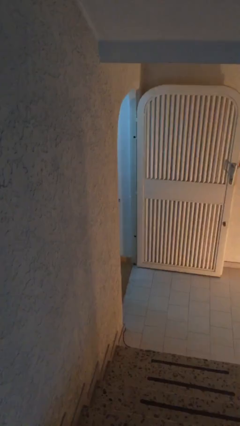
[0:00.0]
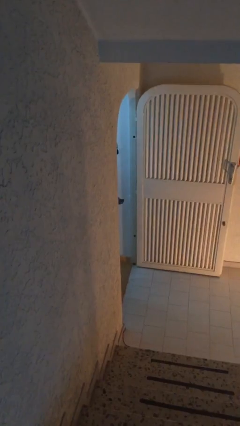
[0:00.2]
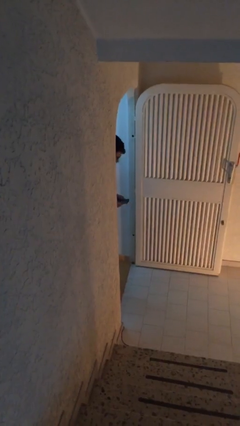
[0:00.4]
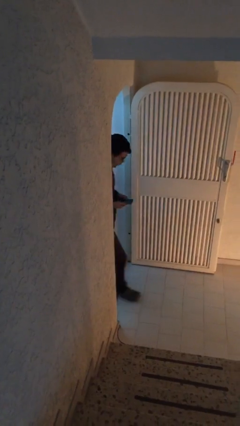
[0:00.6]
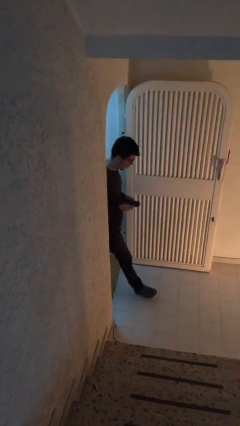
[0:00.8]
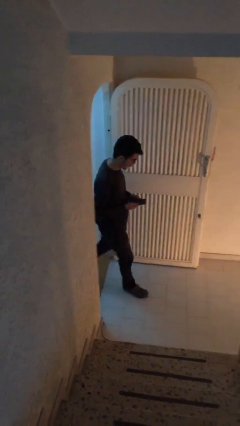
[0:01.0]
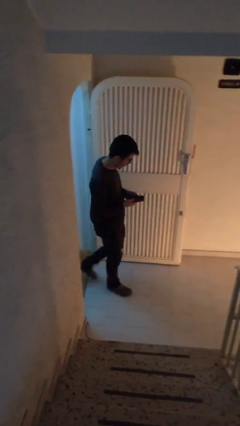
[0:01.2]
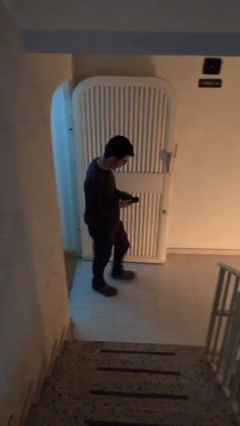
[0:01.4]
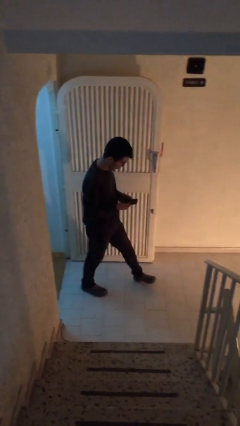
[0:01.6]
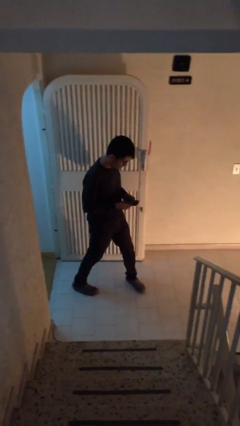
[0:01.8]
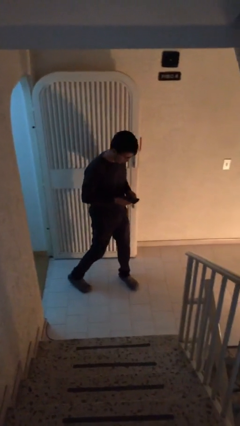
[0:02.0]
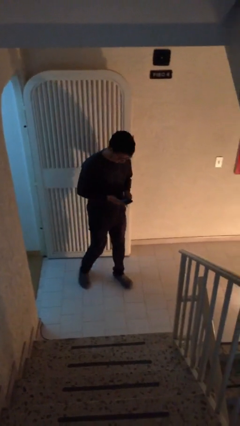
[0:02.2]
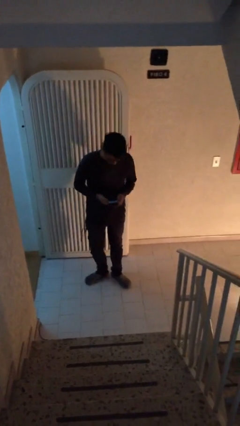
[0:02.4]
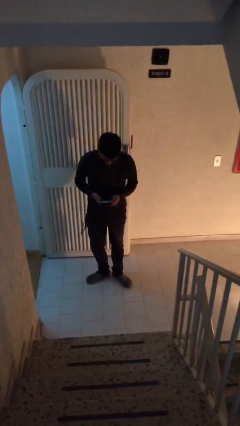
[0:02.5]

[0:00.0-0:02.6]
person enters scene through structure

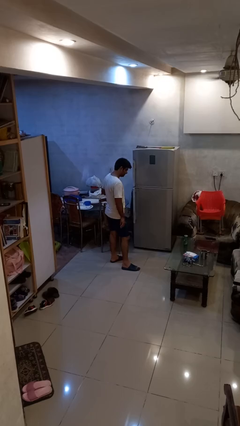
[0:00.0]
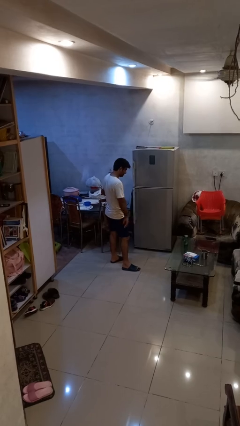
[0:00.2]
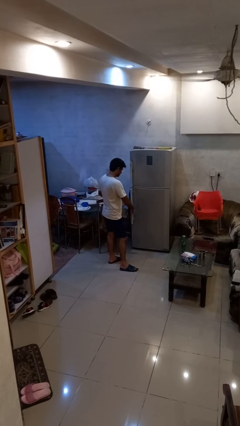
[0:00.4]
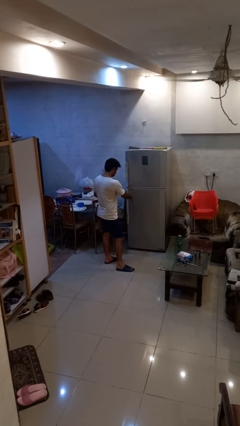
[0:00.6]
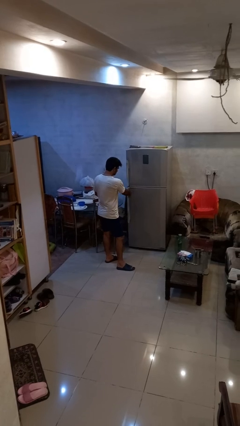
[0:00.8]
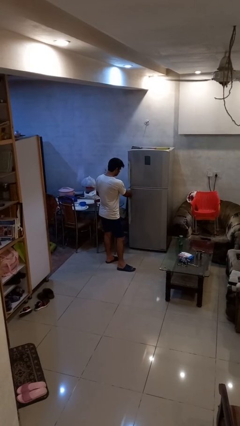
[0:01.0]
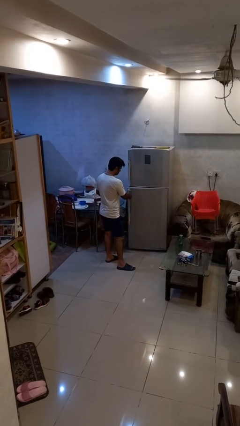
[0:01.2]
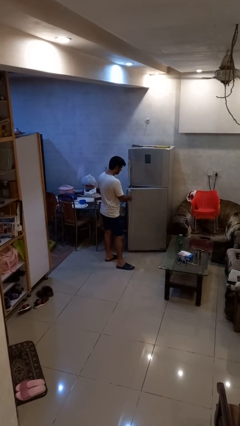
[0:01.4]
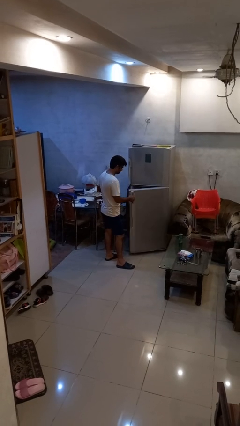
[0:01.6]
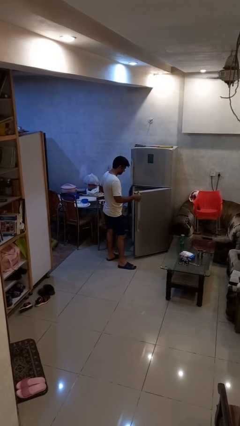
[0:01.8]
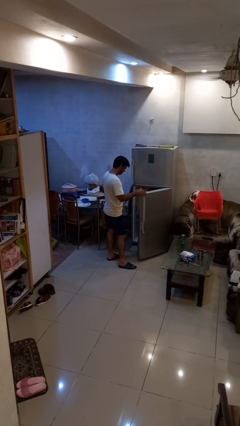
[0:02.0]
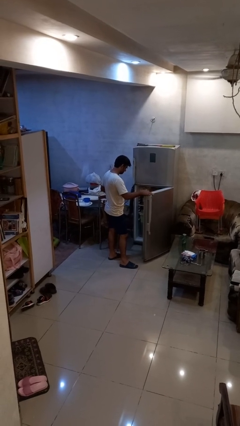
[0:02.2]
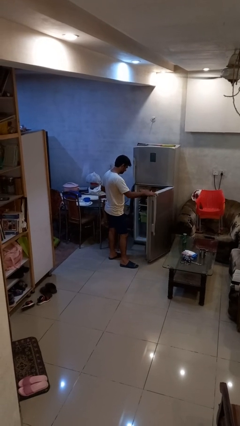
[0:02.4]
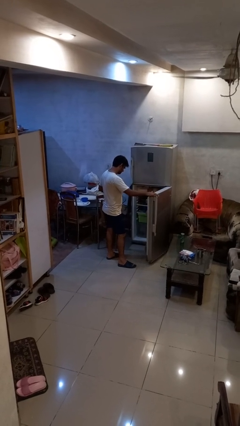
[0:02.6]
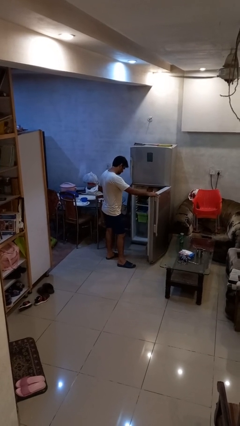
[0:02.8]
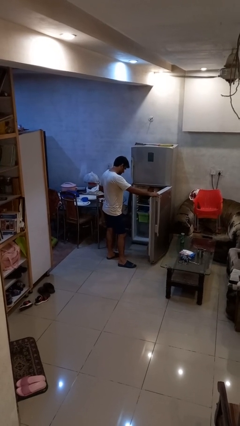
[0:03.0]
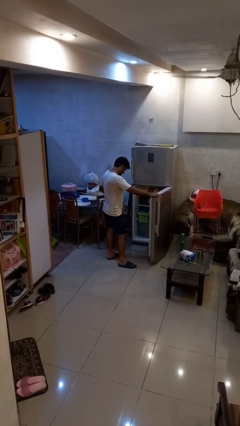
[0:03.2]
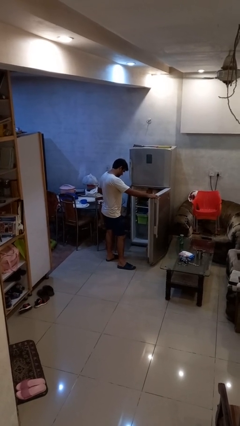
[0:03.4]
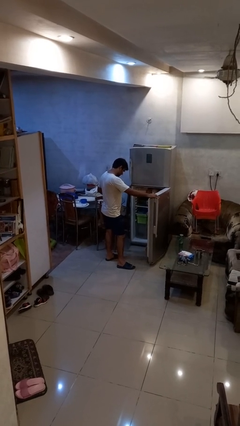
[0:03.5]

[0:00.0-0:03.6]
person opens refrigerator

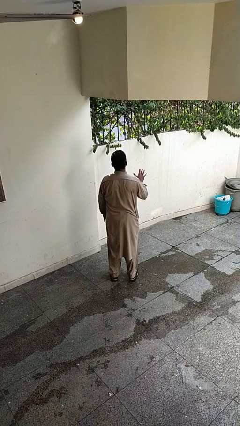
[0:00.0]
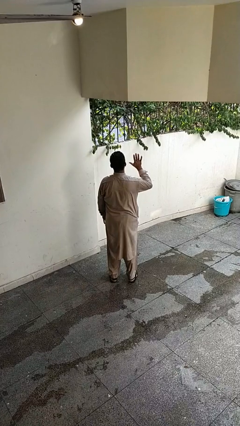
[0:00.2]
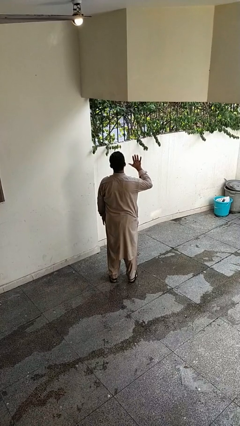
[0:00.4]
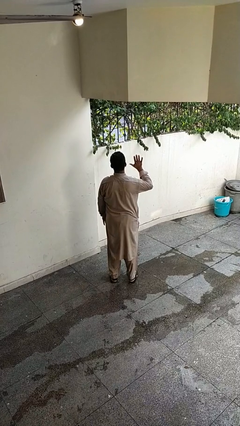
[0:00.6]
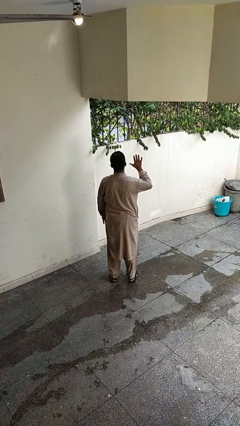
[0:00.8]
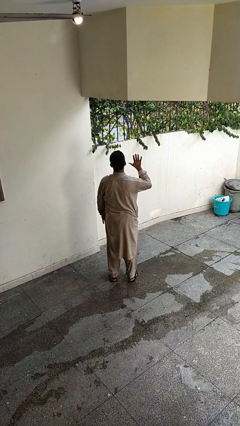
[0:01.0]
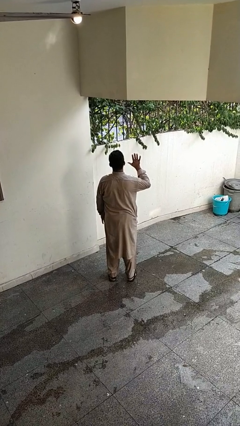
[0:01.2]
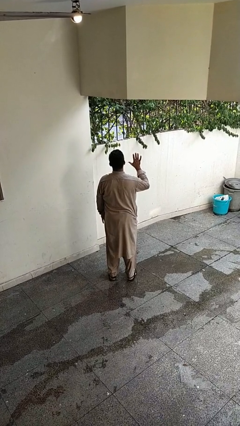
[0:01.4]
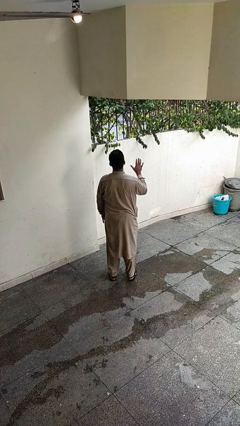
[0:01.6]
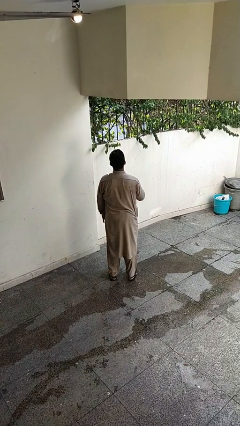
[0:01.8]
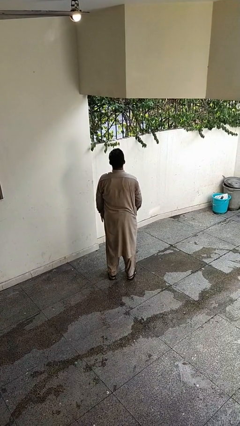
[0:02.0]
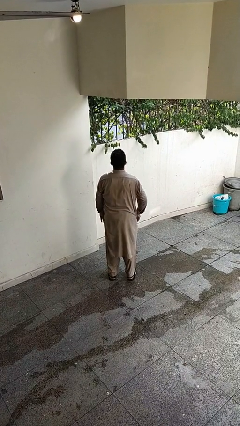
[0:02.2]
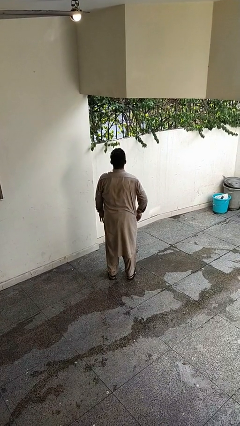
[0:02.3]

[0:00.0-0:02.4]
person gestures number five

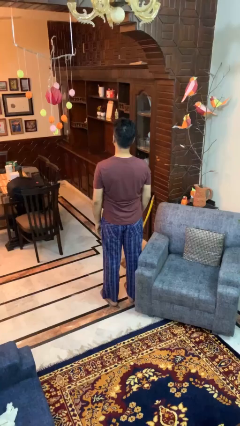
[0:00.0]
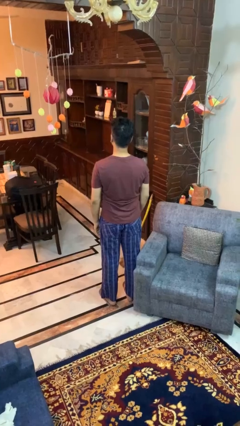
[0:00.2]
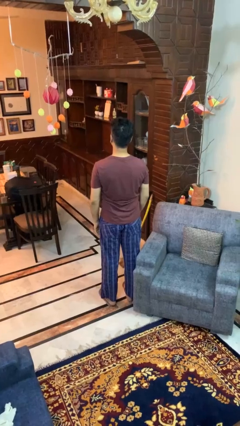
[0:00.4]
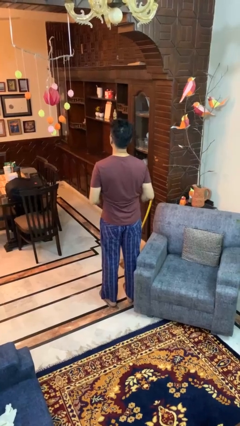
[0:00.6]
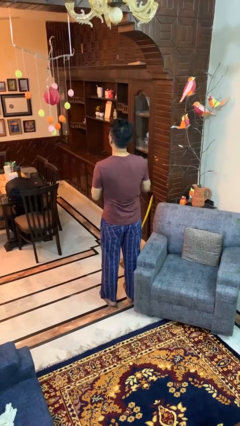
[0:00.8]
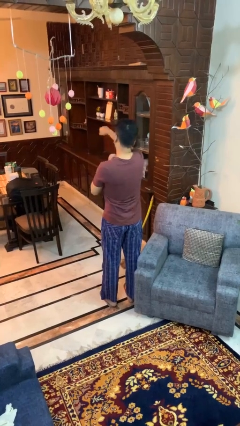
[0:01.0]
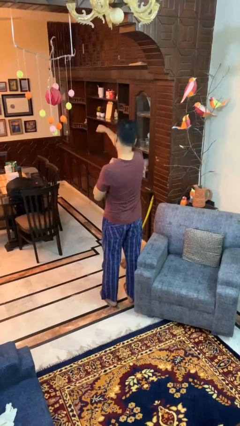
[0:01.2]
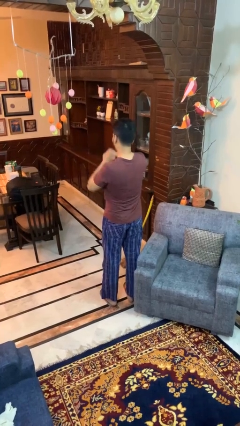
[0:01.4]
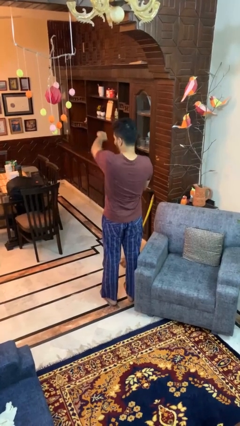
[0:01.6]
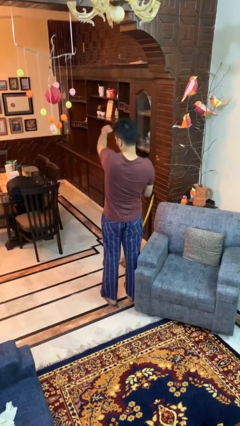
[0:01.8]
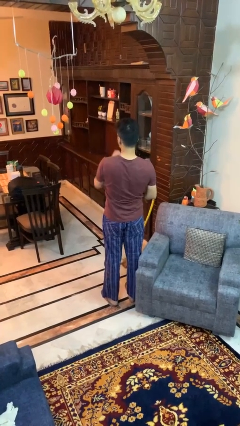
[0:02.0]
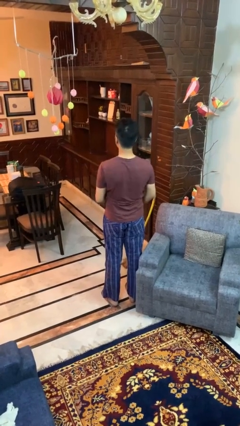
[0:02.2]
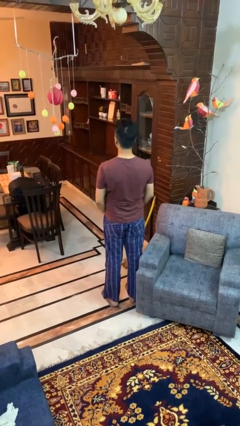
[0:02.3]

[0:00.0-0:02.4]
person punches

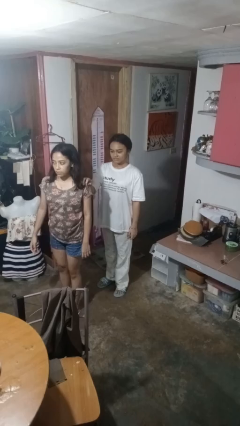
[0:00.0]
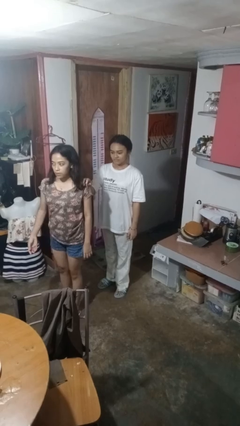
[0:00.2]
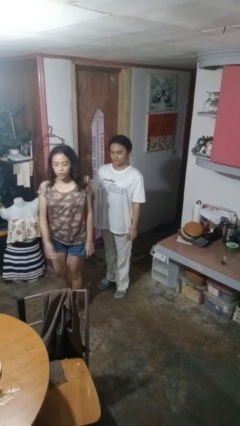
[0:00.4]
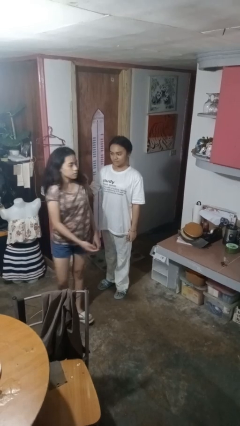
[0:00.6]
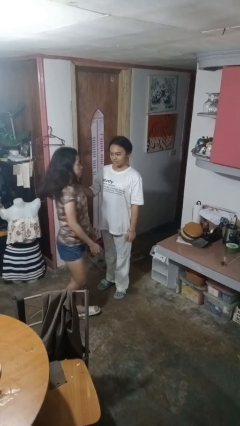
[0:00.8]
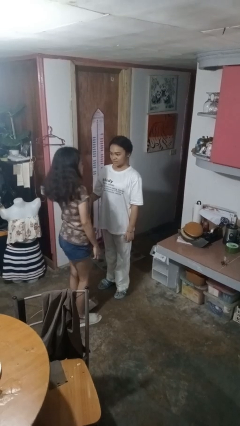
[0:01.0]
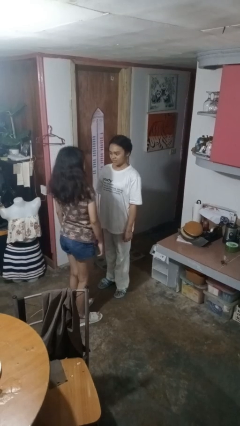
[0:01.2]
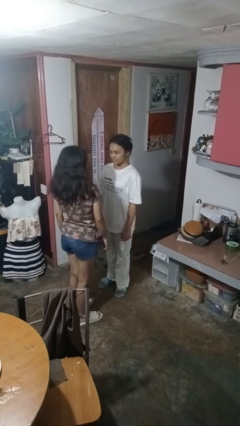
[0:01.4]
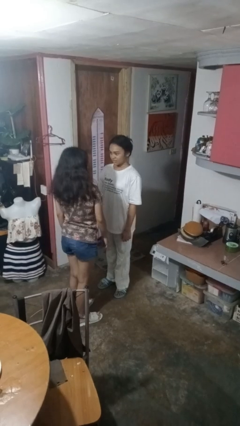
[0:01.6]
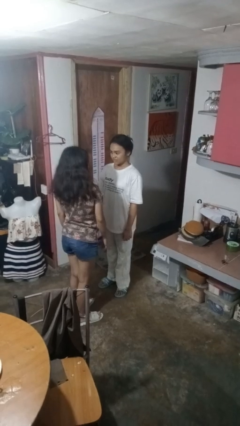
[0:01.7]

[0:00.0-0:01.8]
person spins person around

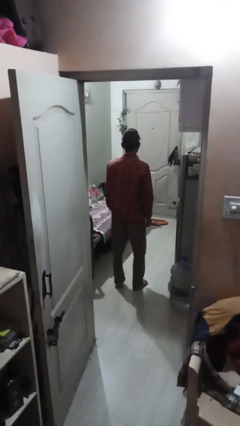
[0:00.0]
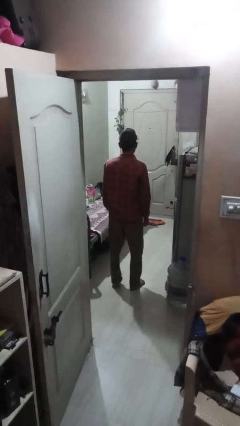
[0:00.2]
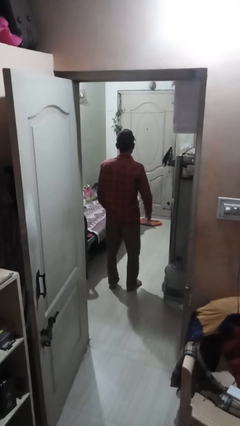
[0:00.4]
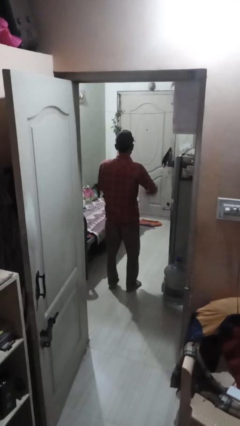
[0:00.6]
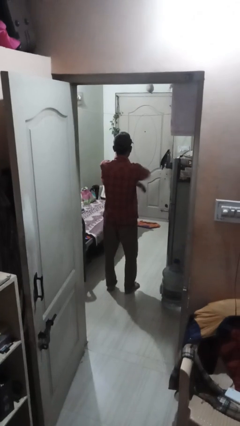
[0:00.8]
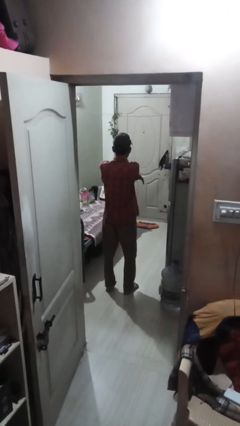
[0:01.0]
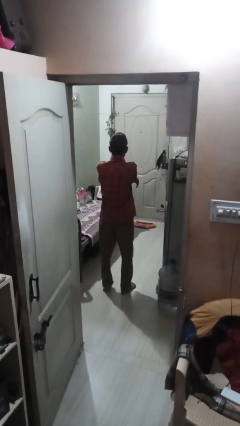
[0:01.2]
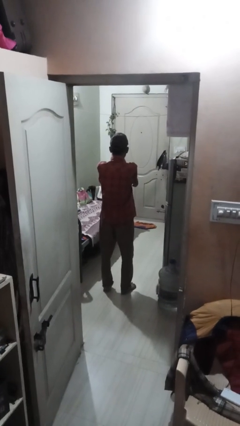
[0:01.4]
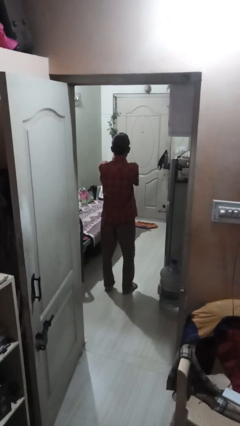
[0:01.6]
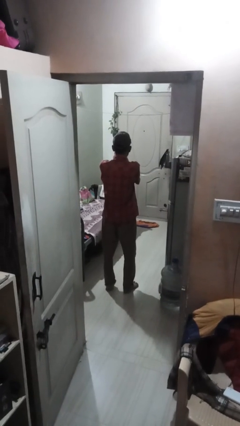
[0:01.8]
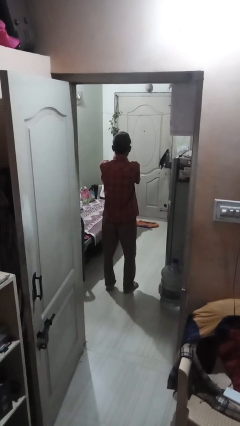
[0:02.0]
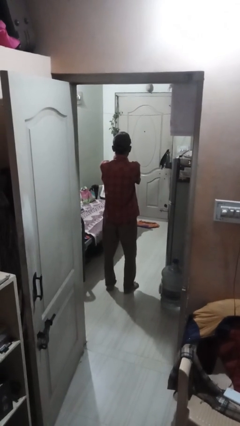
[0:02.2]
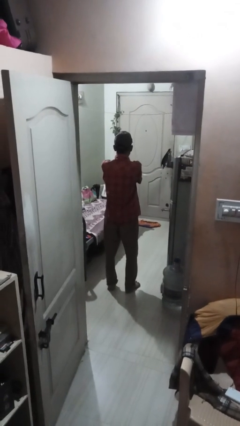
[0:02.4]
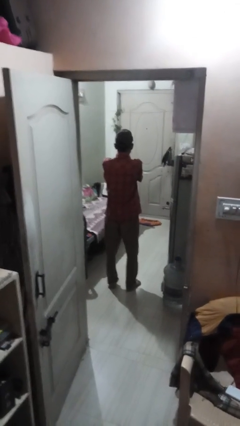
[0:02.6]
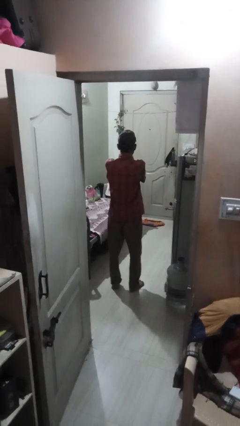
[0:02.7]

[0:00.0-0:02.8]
person crosses arms

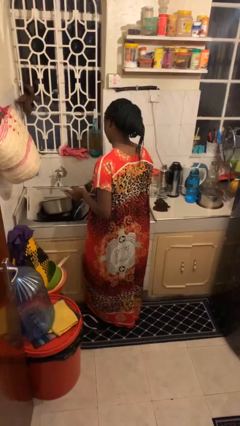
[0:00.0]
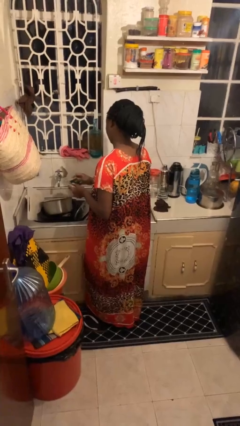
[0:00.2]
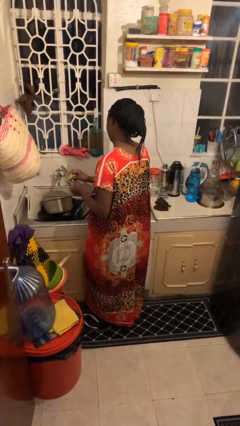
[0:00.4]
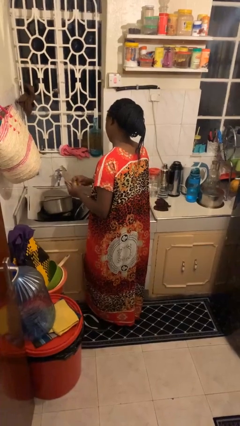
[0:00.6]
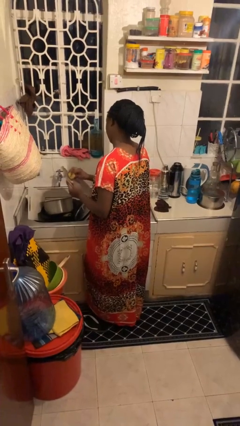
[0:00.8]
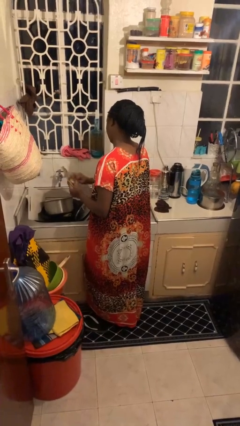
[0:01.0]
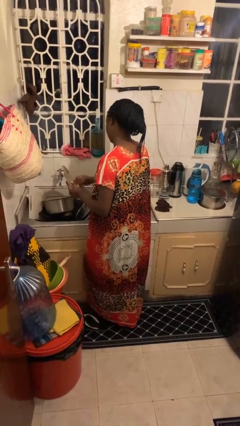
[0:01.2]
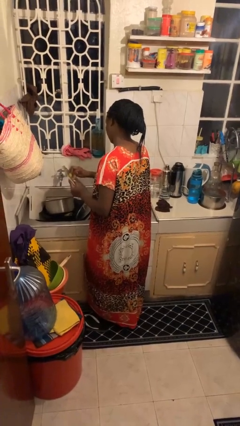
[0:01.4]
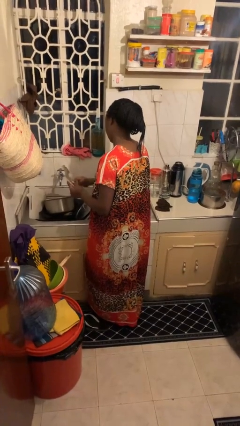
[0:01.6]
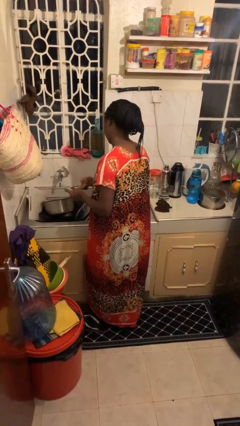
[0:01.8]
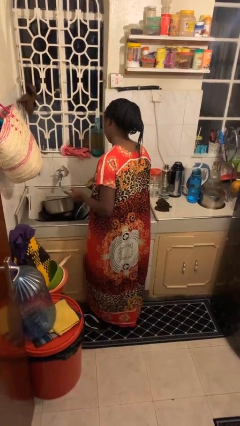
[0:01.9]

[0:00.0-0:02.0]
person washes dish

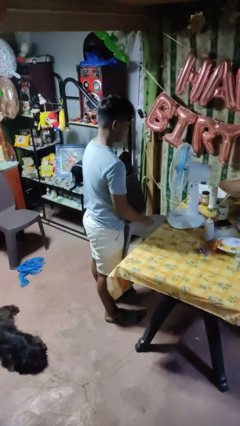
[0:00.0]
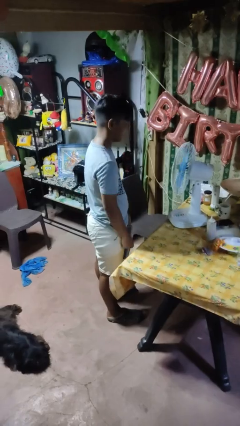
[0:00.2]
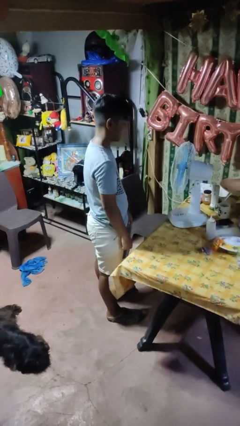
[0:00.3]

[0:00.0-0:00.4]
person turns off fan
